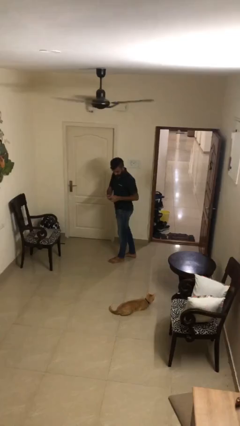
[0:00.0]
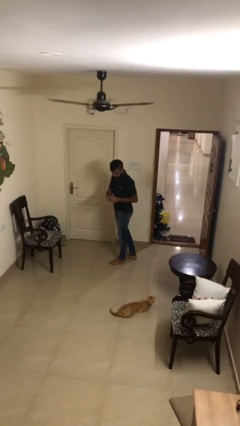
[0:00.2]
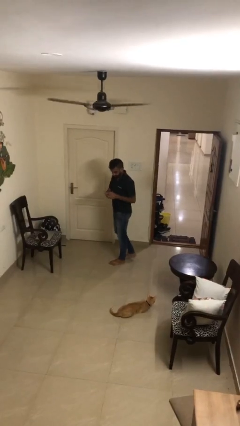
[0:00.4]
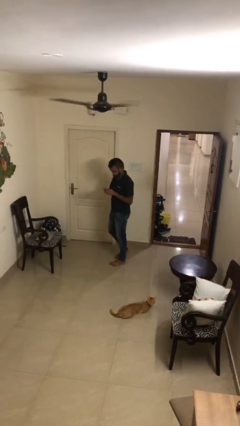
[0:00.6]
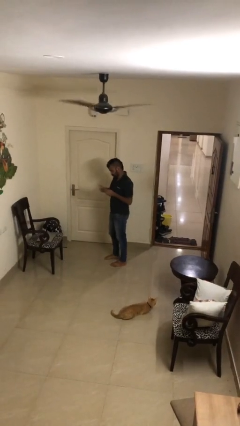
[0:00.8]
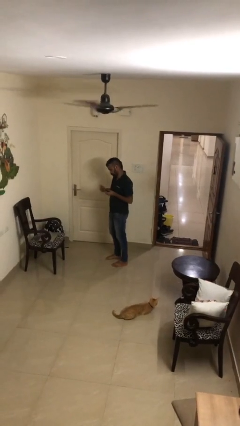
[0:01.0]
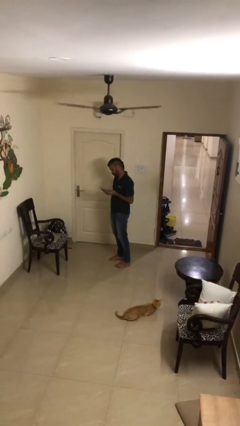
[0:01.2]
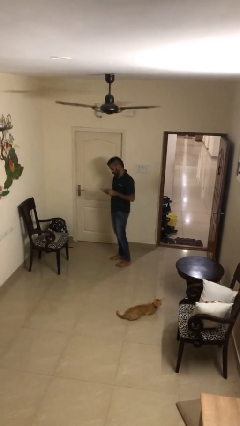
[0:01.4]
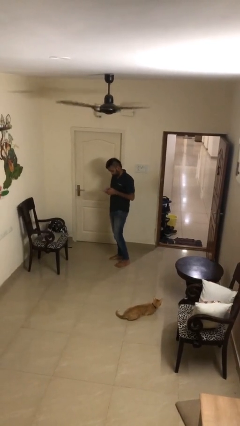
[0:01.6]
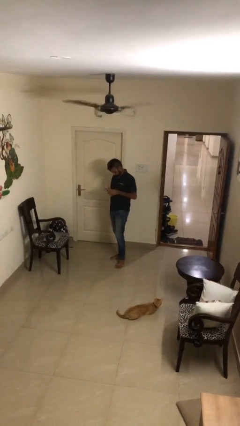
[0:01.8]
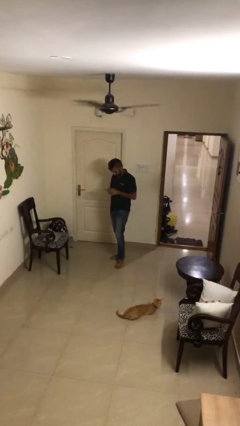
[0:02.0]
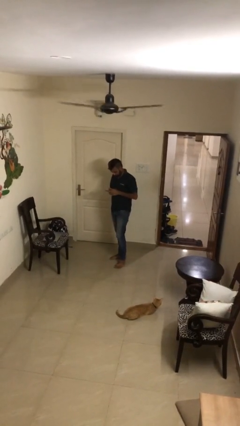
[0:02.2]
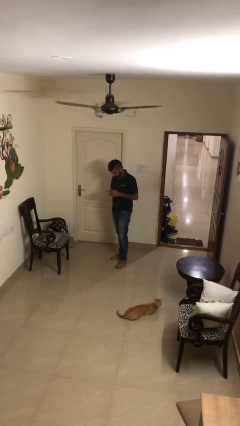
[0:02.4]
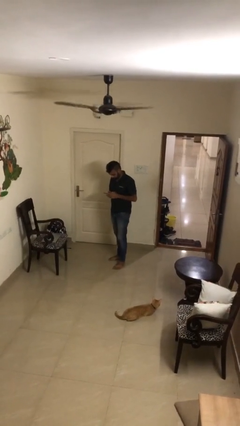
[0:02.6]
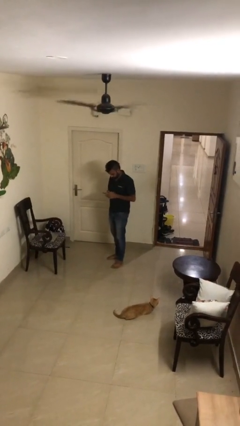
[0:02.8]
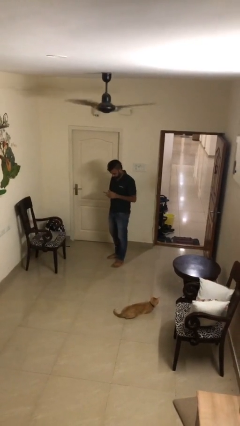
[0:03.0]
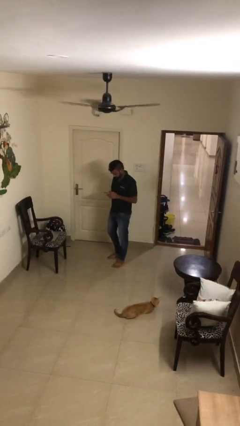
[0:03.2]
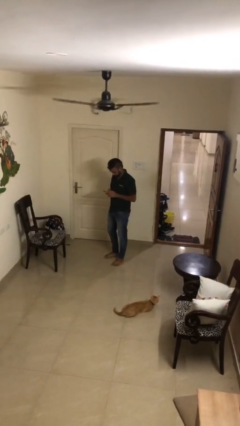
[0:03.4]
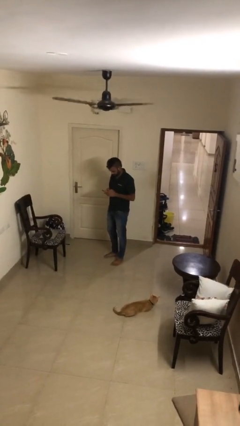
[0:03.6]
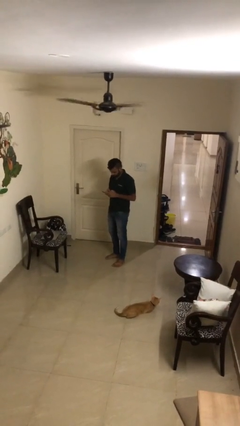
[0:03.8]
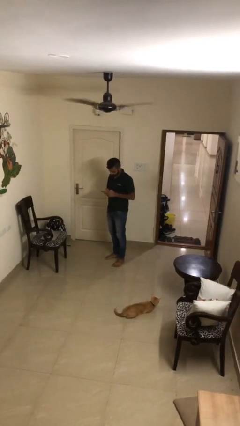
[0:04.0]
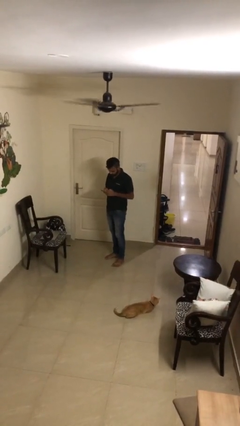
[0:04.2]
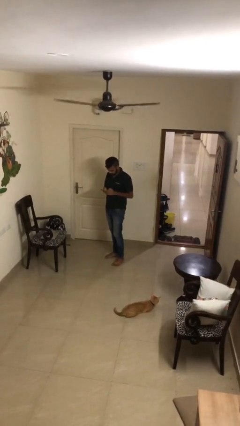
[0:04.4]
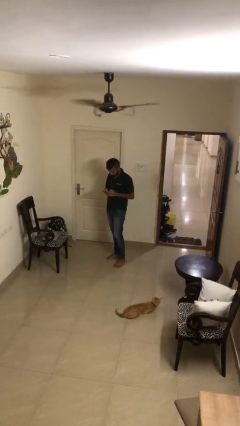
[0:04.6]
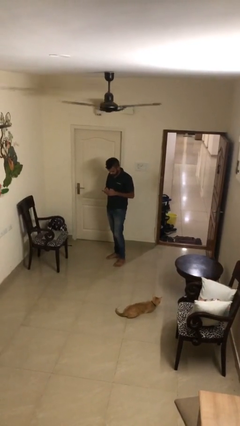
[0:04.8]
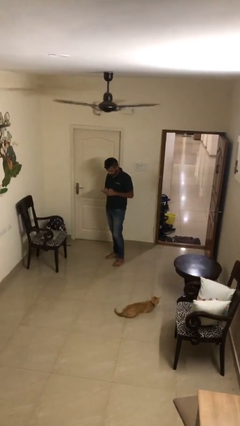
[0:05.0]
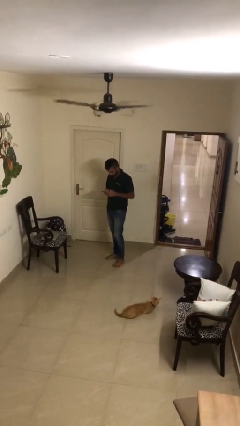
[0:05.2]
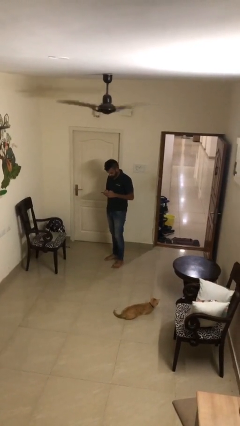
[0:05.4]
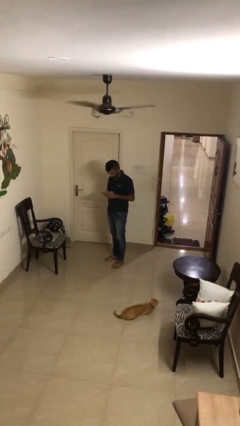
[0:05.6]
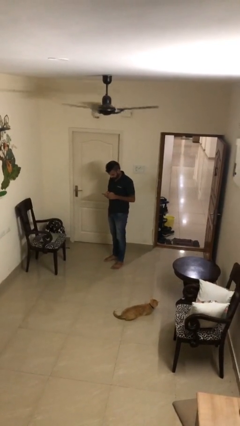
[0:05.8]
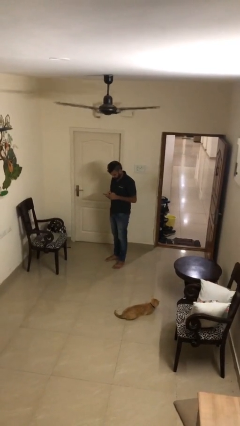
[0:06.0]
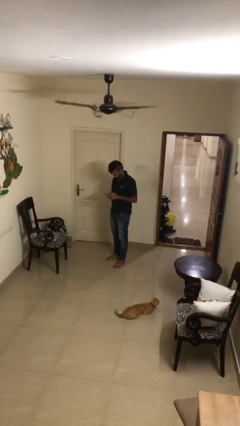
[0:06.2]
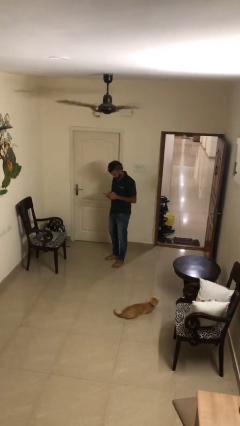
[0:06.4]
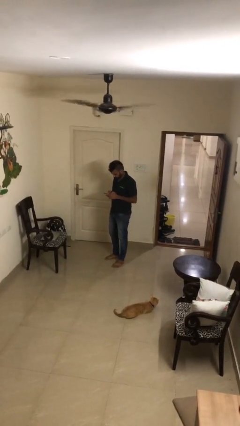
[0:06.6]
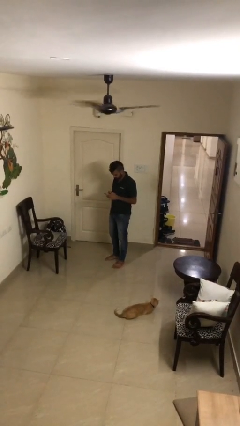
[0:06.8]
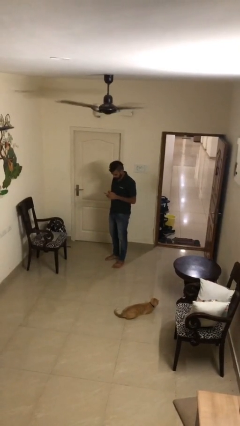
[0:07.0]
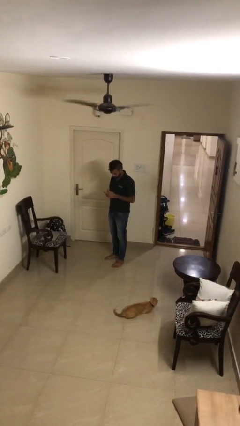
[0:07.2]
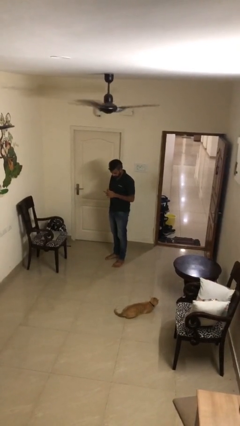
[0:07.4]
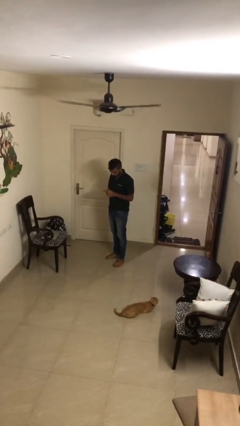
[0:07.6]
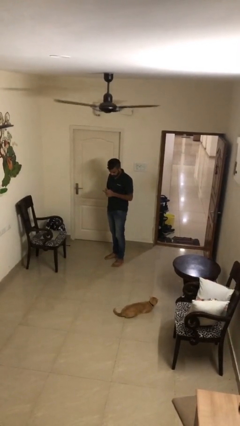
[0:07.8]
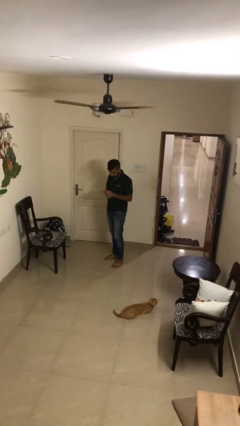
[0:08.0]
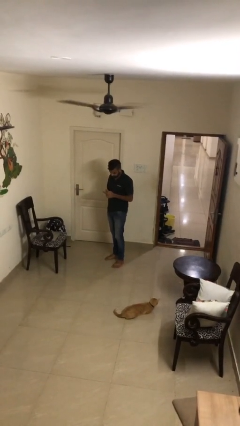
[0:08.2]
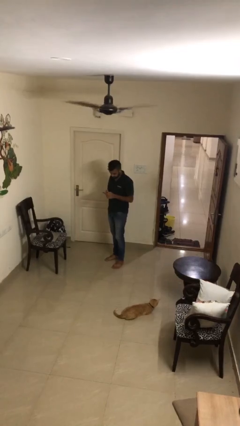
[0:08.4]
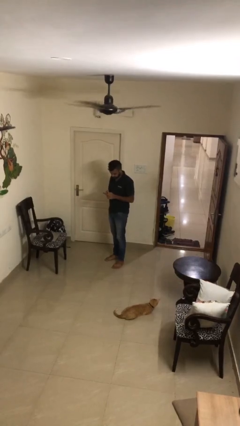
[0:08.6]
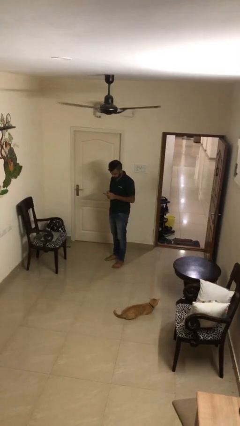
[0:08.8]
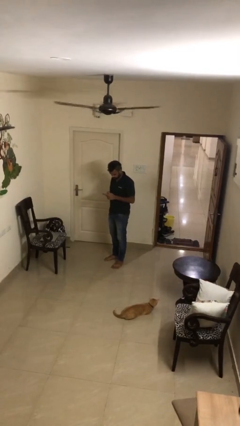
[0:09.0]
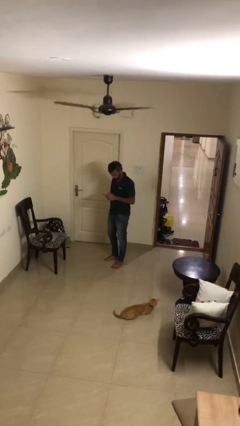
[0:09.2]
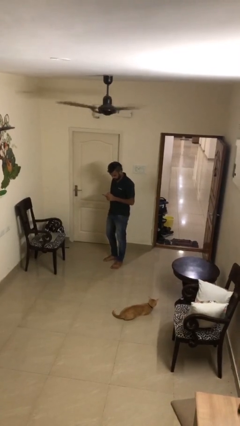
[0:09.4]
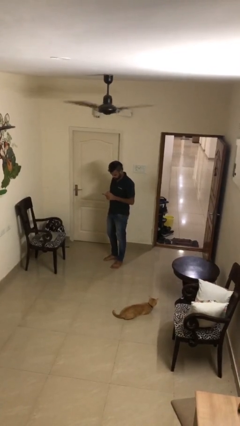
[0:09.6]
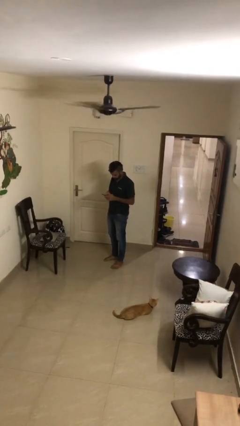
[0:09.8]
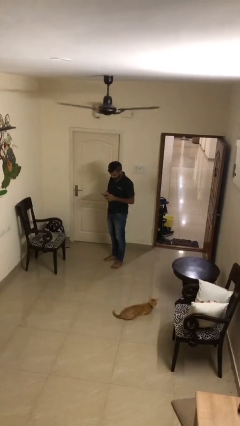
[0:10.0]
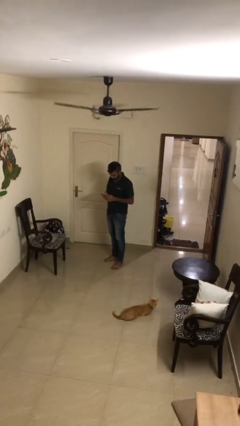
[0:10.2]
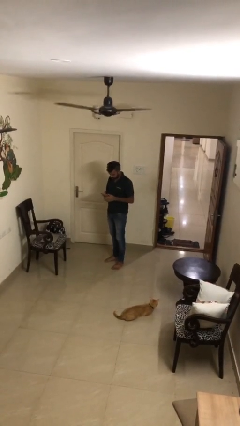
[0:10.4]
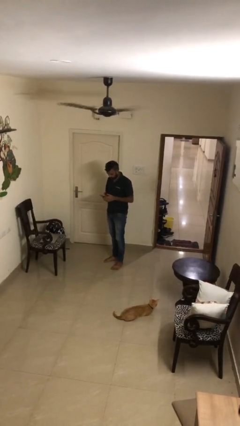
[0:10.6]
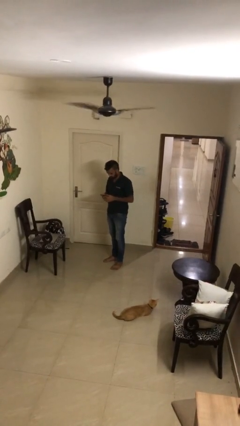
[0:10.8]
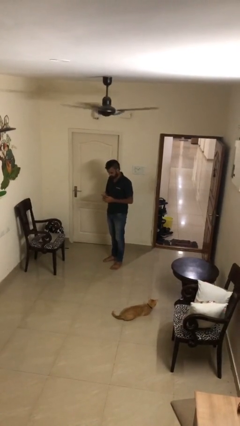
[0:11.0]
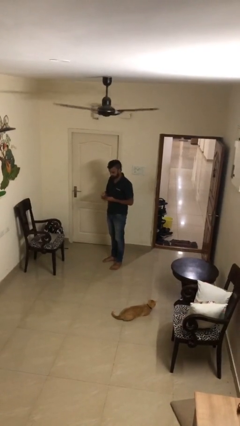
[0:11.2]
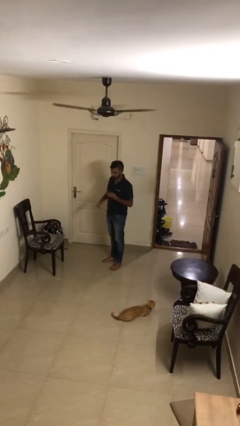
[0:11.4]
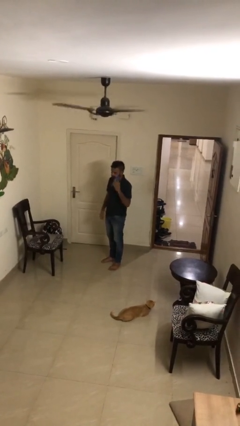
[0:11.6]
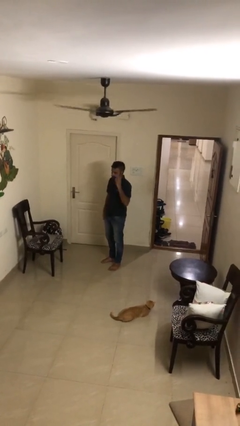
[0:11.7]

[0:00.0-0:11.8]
person texts on phone

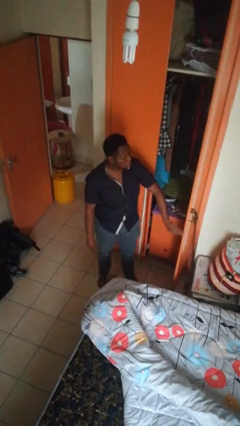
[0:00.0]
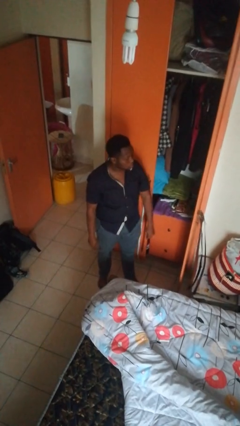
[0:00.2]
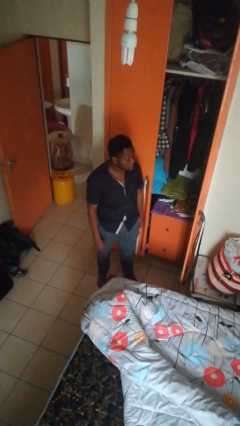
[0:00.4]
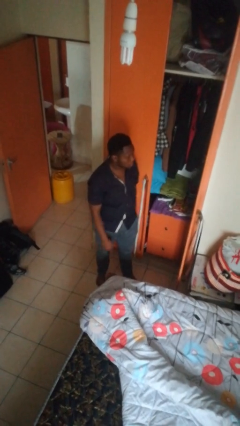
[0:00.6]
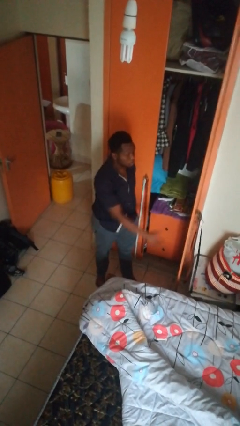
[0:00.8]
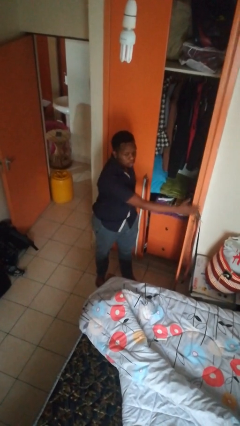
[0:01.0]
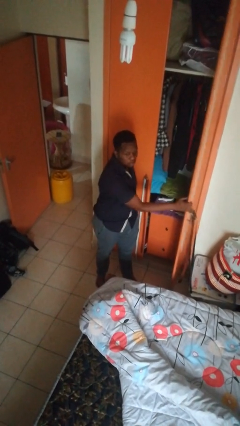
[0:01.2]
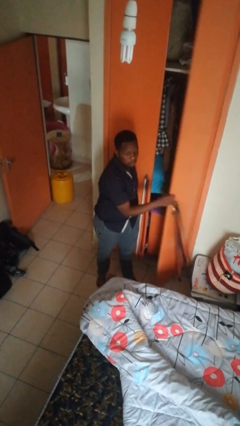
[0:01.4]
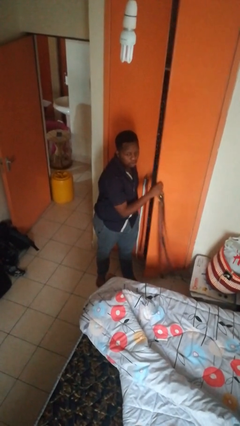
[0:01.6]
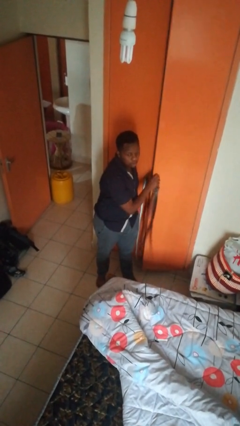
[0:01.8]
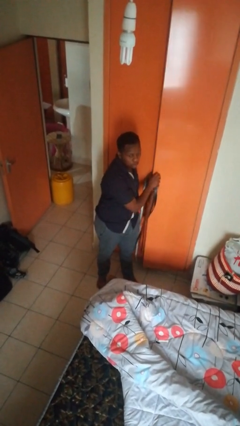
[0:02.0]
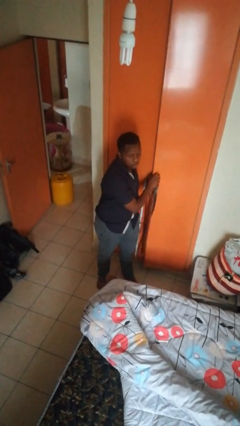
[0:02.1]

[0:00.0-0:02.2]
person closes closet door

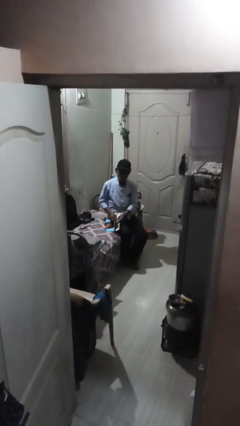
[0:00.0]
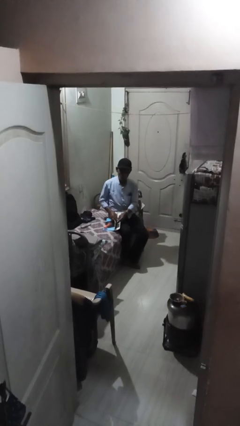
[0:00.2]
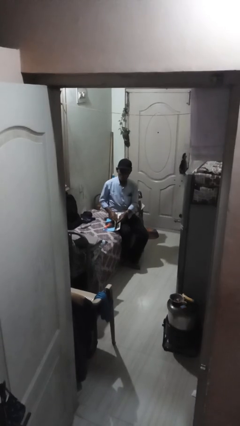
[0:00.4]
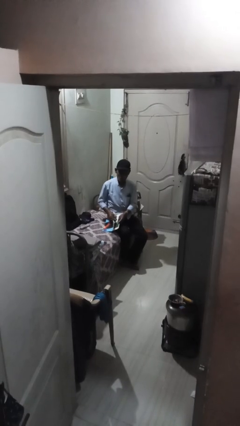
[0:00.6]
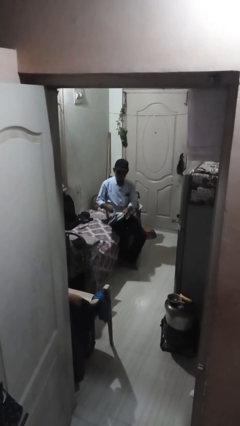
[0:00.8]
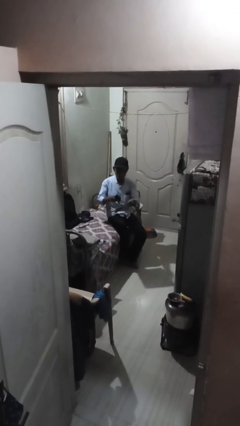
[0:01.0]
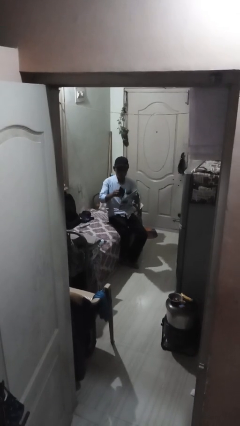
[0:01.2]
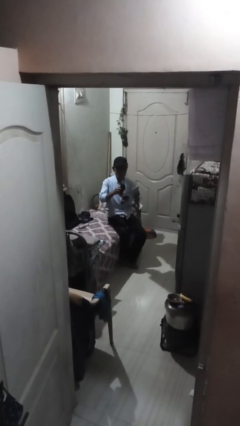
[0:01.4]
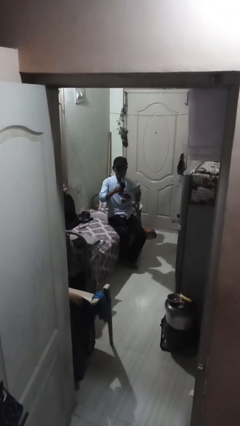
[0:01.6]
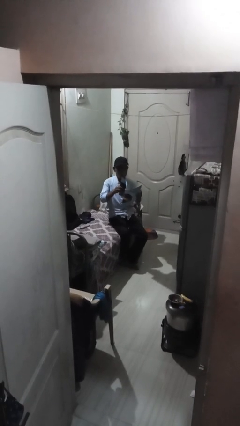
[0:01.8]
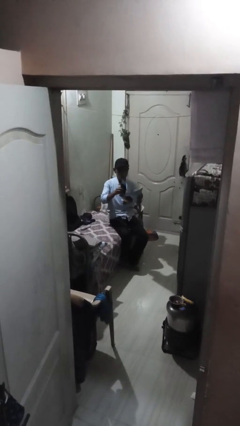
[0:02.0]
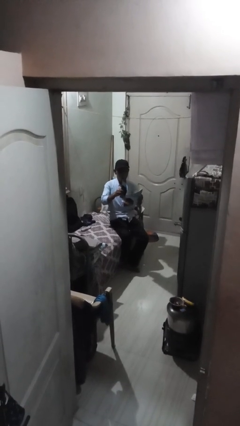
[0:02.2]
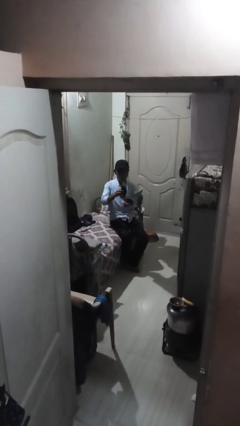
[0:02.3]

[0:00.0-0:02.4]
person reads magazine

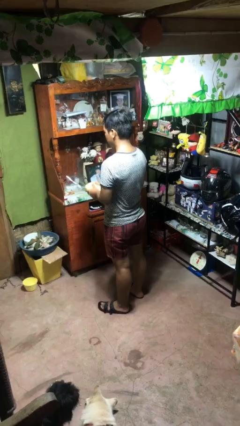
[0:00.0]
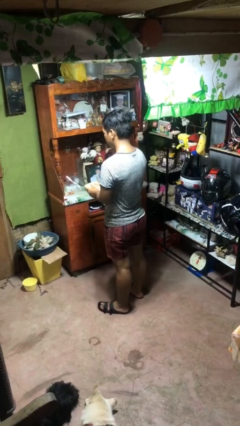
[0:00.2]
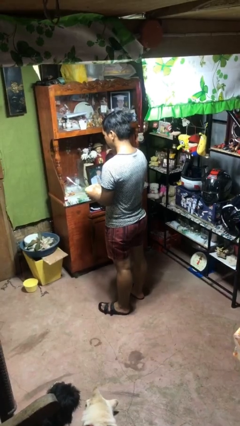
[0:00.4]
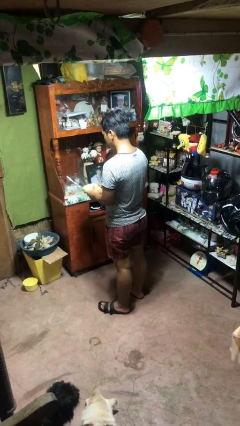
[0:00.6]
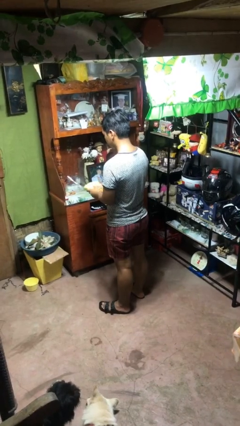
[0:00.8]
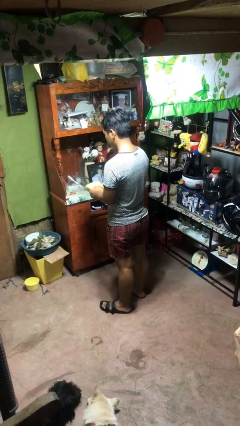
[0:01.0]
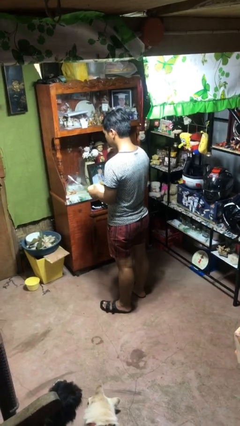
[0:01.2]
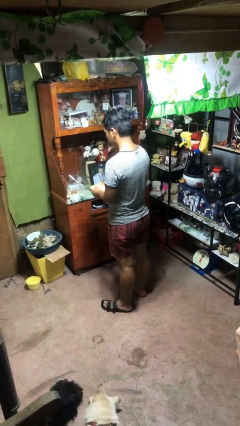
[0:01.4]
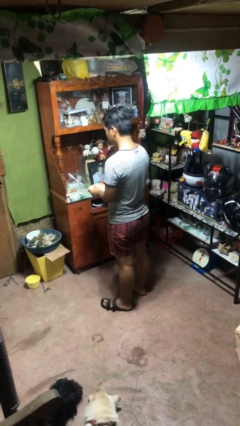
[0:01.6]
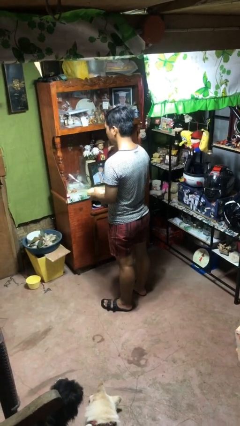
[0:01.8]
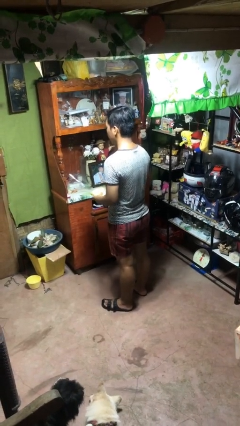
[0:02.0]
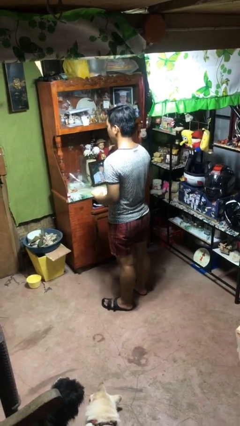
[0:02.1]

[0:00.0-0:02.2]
person squeezes object
